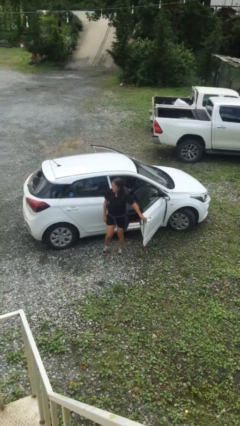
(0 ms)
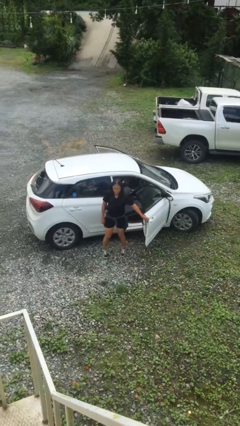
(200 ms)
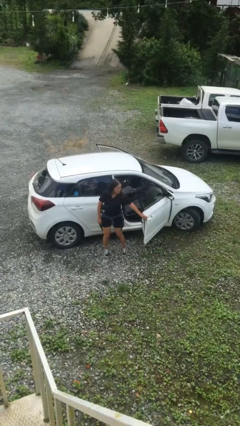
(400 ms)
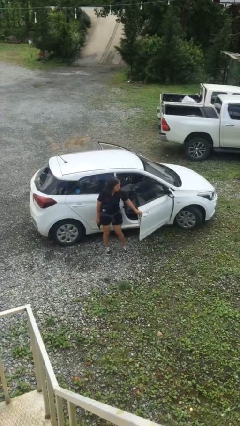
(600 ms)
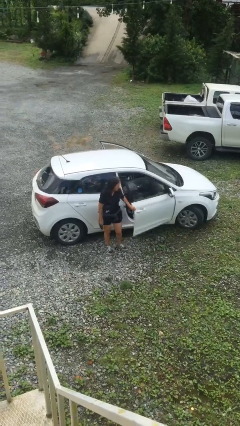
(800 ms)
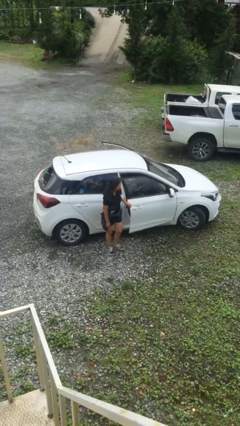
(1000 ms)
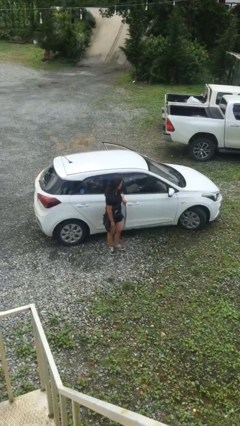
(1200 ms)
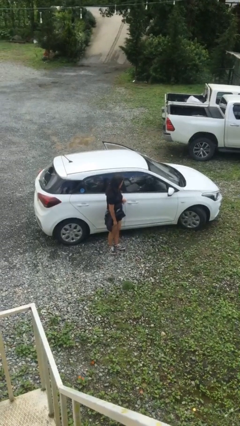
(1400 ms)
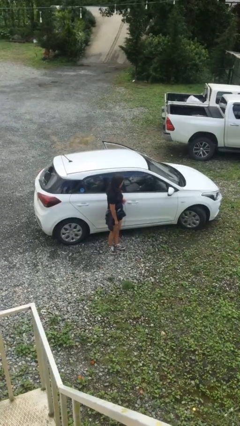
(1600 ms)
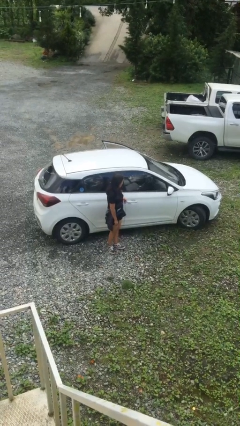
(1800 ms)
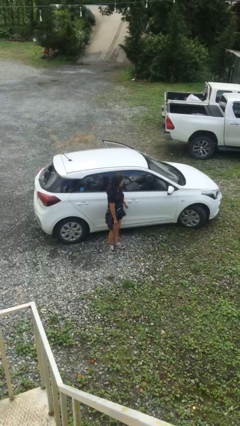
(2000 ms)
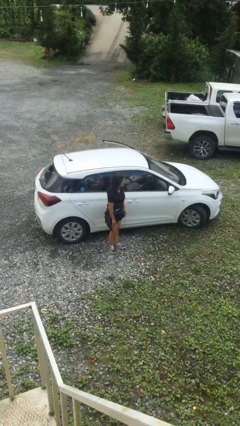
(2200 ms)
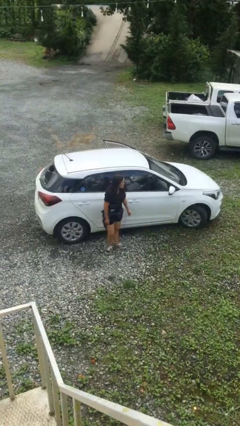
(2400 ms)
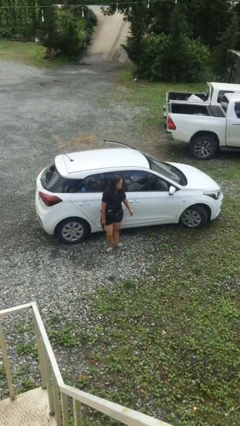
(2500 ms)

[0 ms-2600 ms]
person closes car door

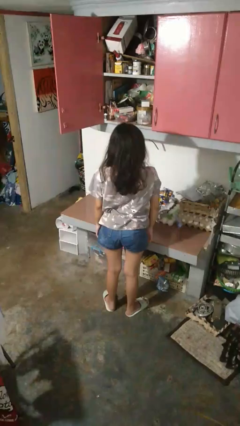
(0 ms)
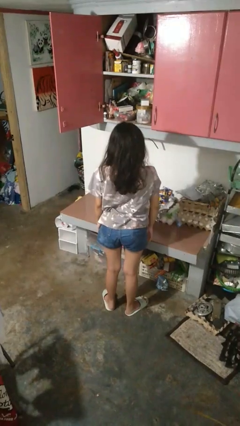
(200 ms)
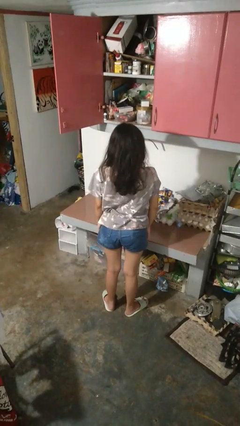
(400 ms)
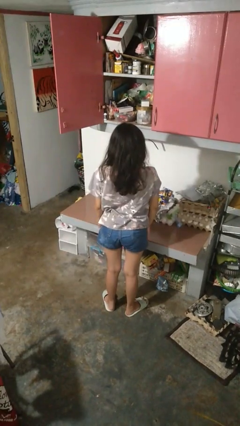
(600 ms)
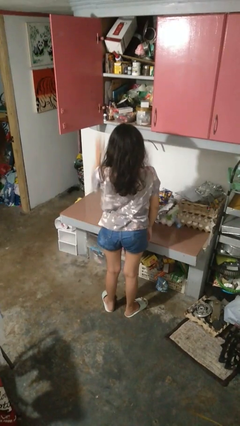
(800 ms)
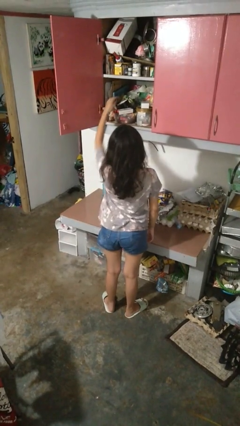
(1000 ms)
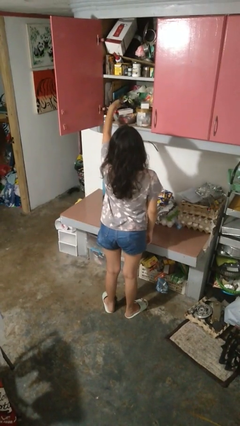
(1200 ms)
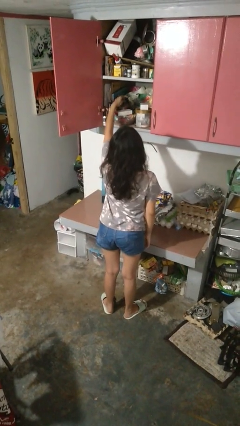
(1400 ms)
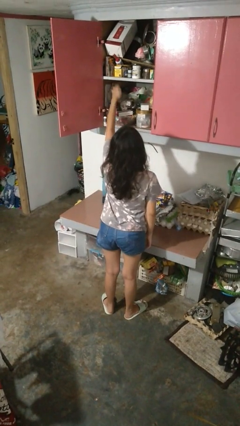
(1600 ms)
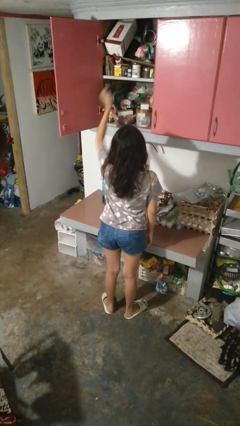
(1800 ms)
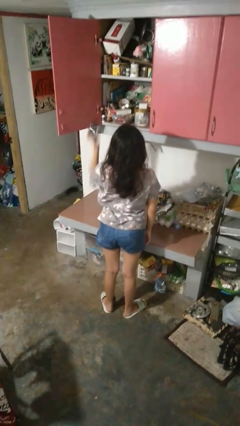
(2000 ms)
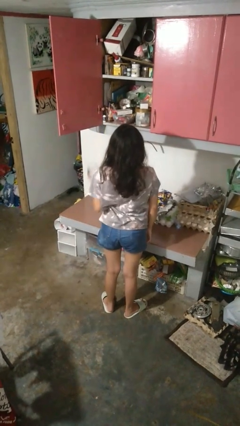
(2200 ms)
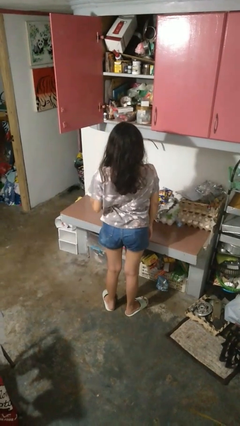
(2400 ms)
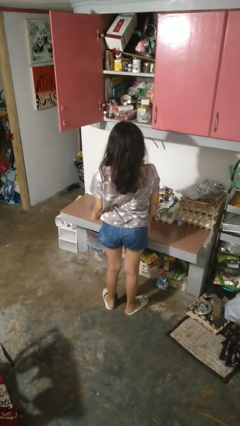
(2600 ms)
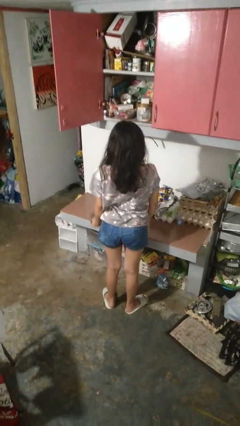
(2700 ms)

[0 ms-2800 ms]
person takes object from cabinet

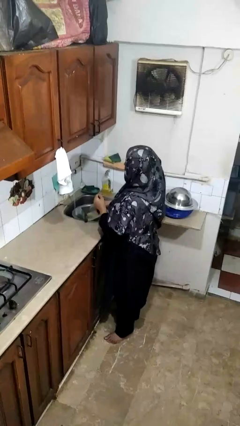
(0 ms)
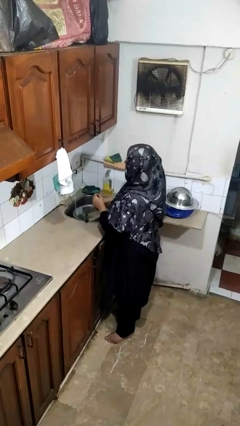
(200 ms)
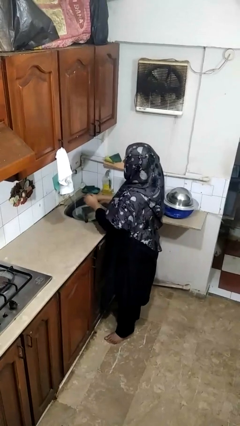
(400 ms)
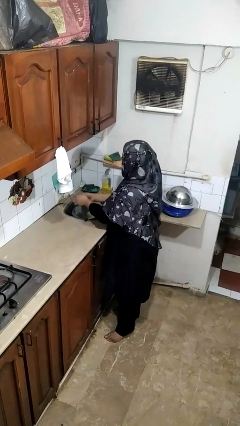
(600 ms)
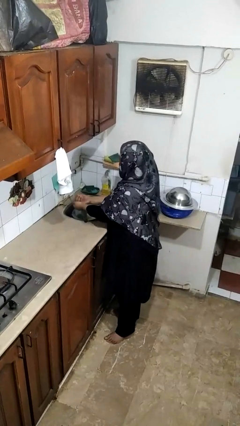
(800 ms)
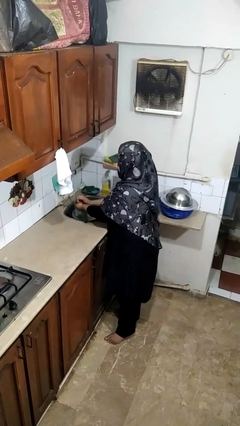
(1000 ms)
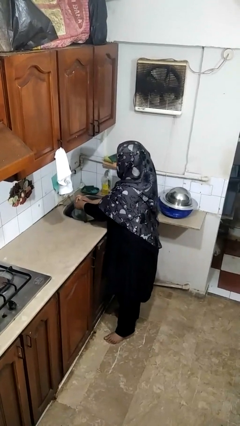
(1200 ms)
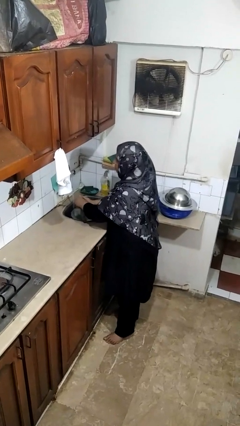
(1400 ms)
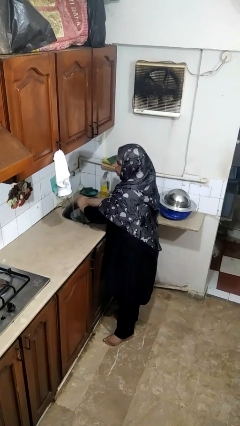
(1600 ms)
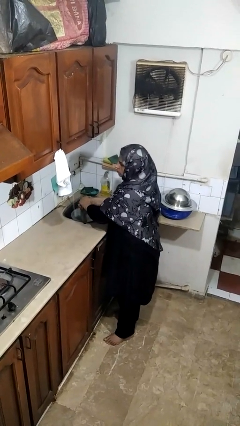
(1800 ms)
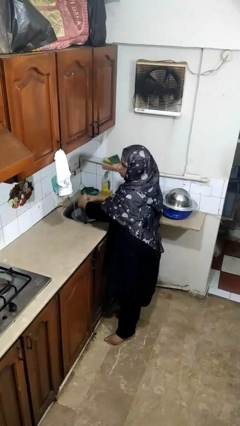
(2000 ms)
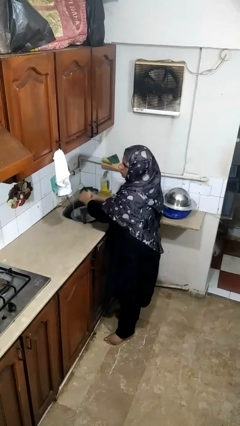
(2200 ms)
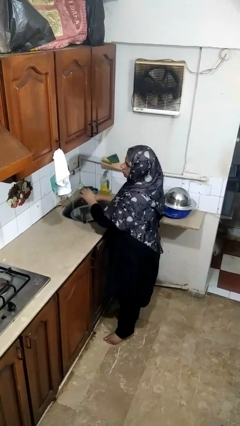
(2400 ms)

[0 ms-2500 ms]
person washes hands

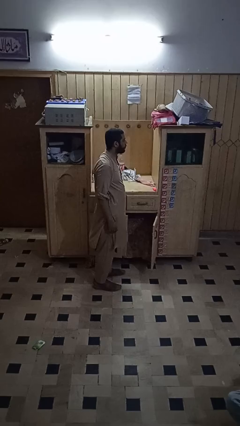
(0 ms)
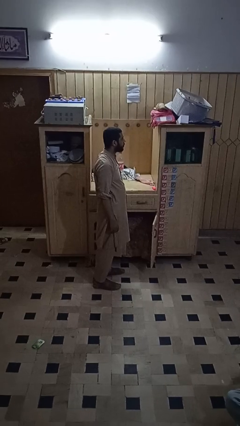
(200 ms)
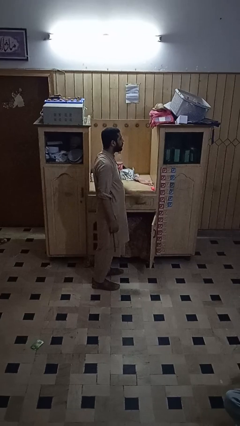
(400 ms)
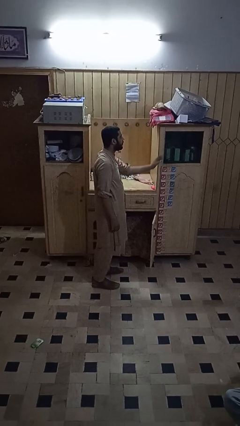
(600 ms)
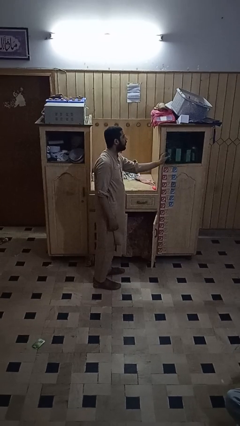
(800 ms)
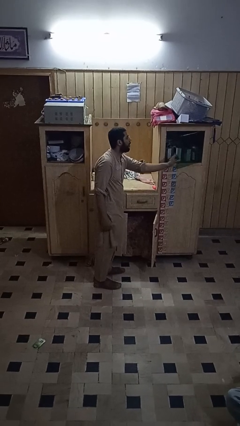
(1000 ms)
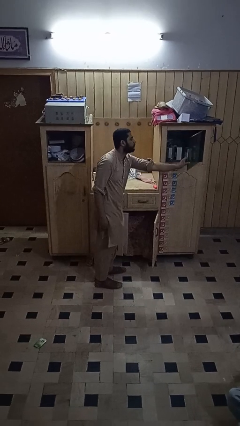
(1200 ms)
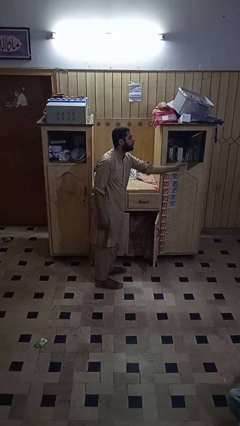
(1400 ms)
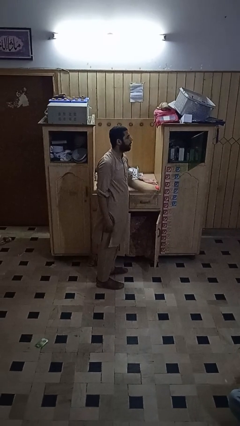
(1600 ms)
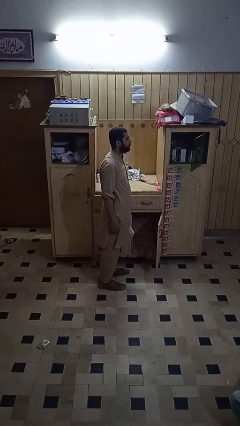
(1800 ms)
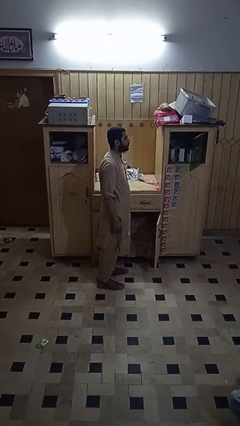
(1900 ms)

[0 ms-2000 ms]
person closes cabinet

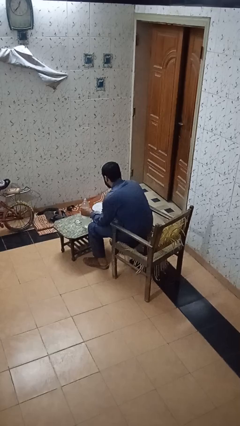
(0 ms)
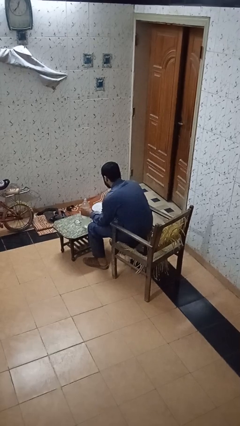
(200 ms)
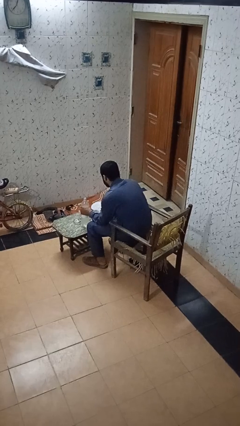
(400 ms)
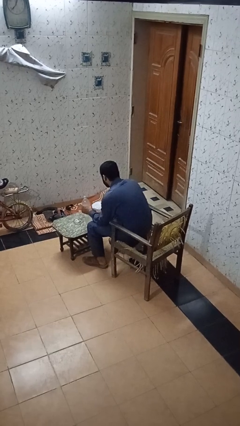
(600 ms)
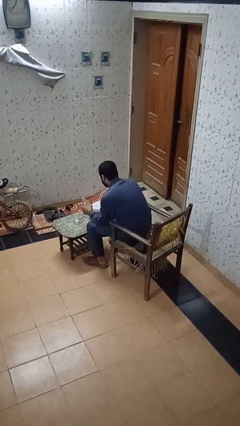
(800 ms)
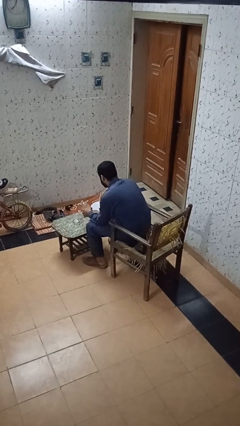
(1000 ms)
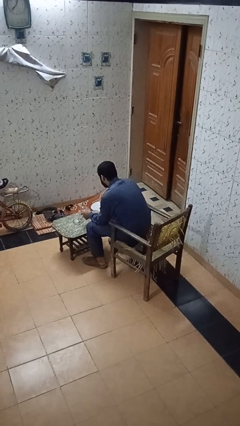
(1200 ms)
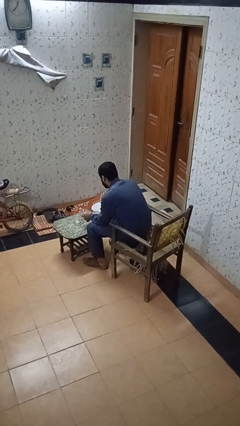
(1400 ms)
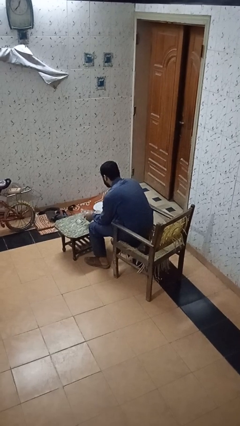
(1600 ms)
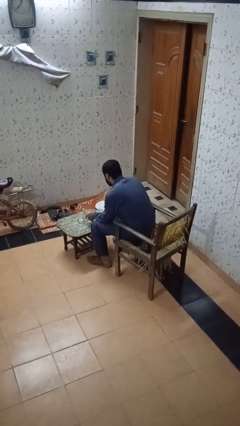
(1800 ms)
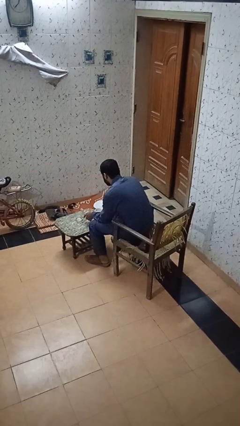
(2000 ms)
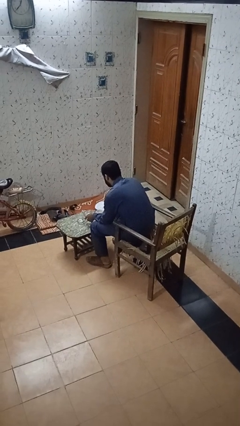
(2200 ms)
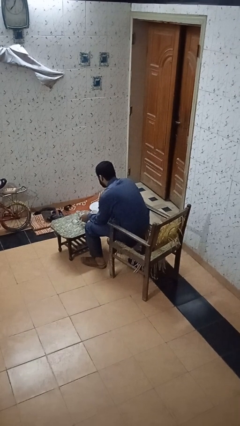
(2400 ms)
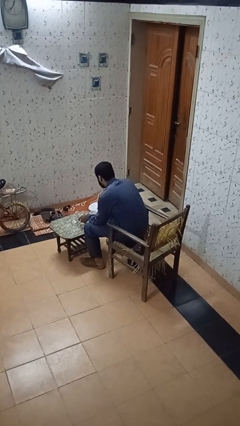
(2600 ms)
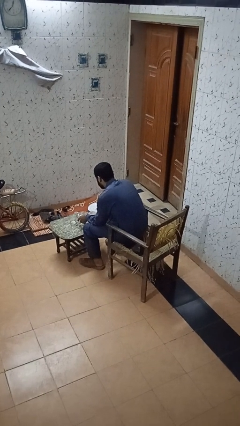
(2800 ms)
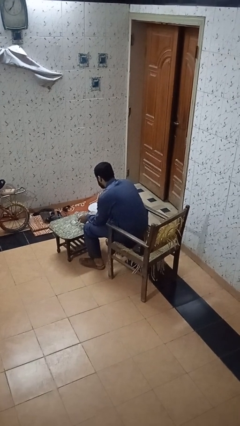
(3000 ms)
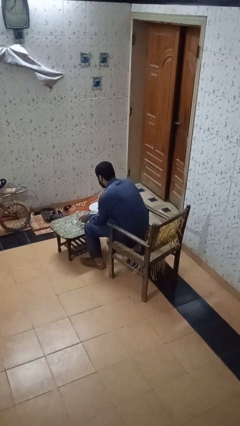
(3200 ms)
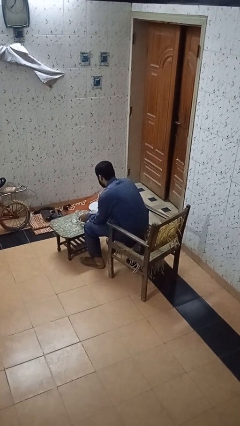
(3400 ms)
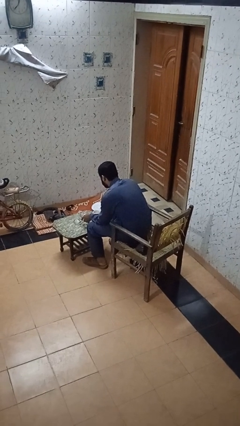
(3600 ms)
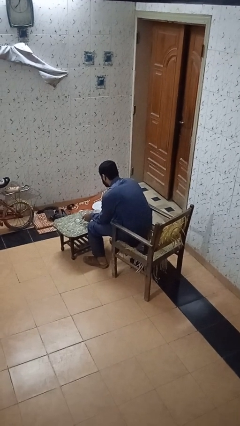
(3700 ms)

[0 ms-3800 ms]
person pours liquid into cup

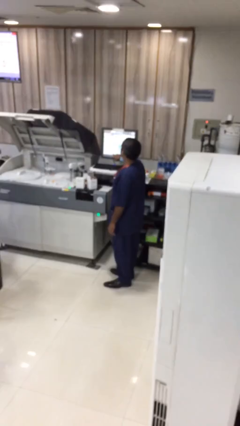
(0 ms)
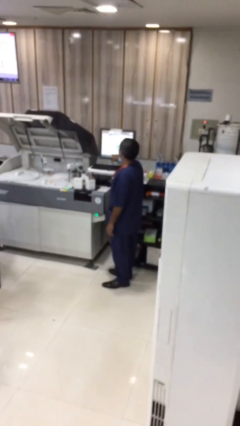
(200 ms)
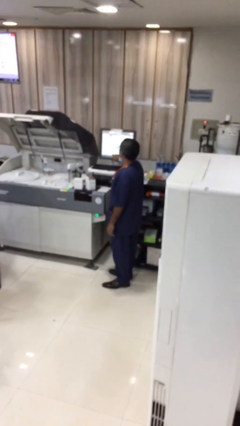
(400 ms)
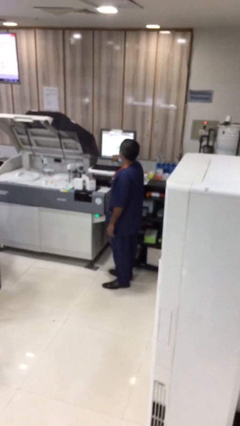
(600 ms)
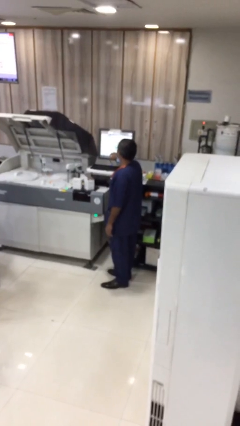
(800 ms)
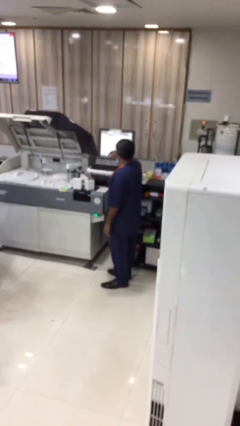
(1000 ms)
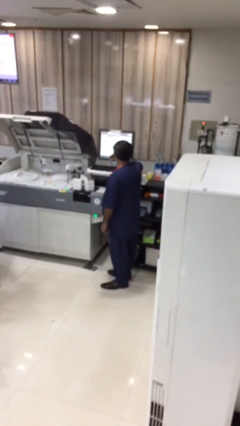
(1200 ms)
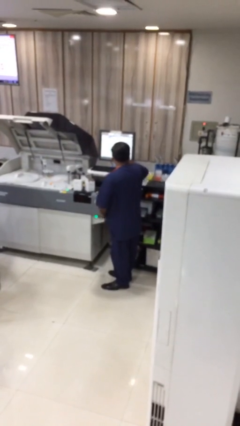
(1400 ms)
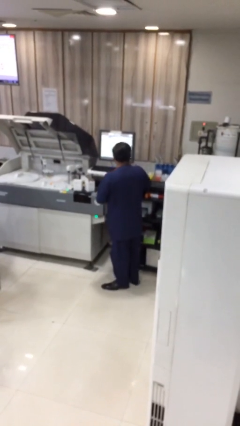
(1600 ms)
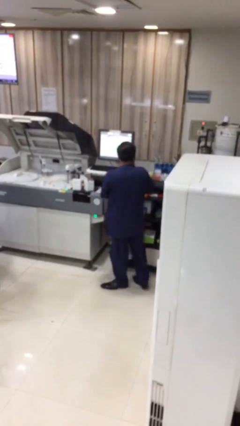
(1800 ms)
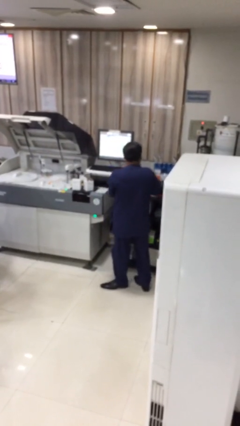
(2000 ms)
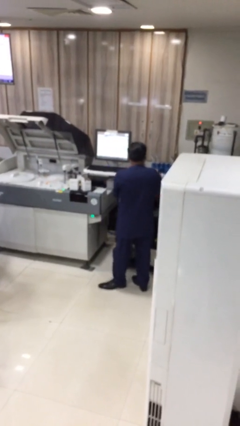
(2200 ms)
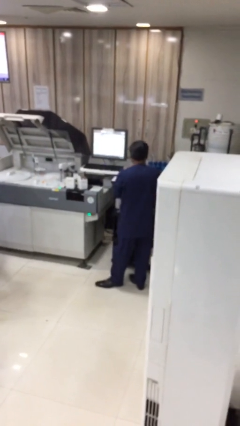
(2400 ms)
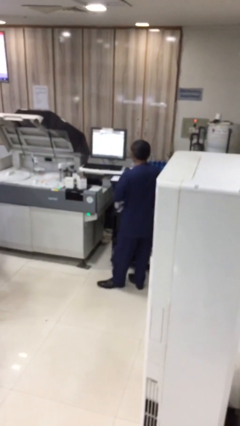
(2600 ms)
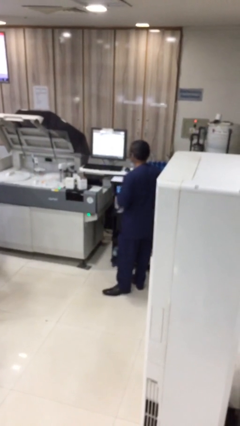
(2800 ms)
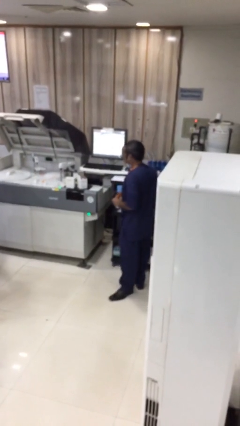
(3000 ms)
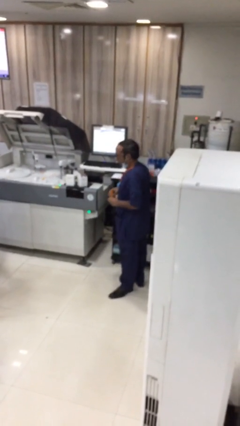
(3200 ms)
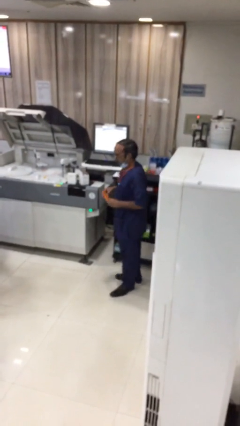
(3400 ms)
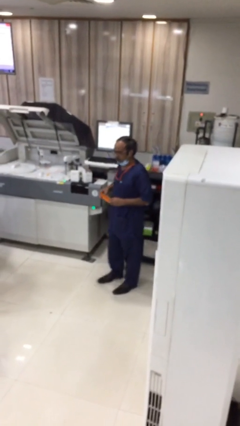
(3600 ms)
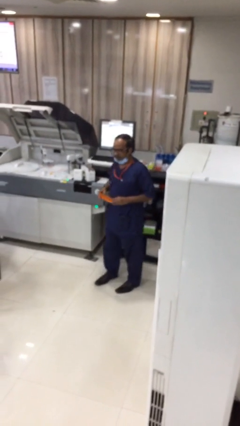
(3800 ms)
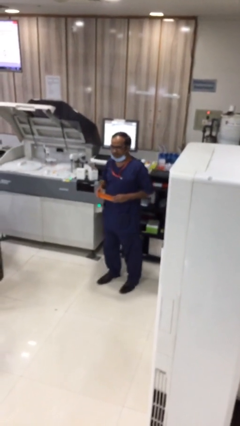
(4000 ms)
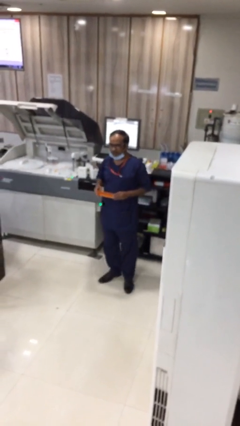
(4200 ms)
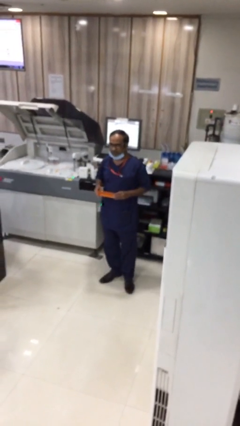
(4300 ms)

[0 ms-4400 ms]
person purchases from machine
